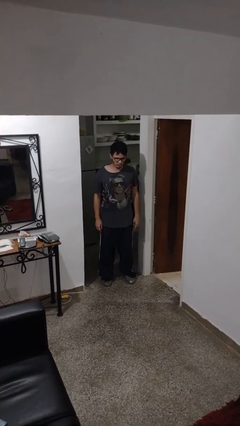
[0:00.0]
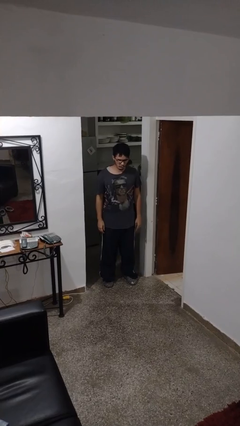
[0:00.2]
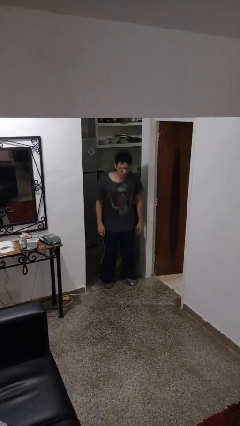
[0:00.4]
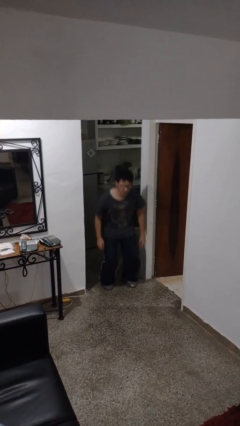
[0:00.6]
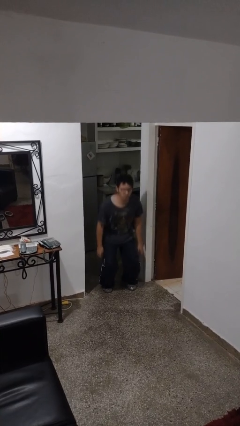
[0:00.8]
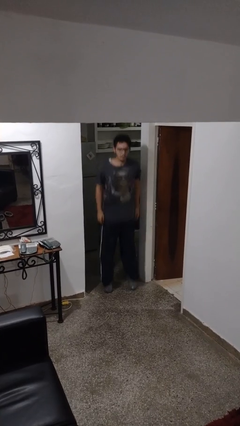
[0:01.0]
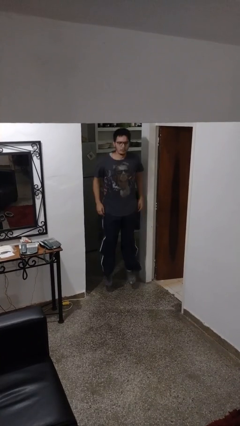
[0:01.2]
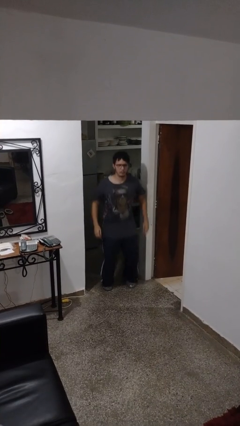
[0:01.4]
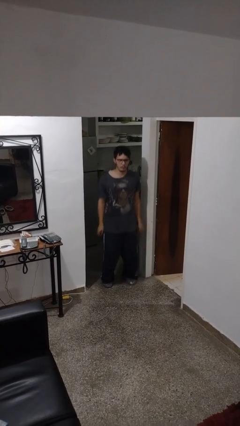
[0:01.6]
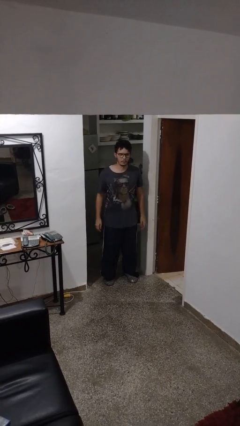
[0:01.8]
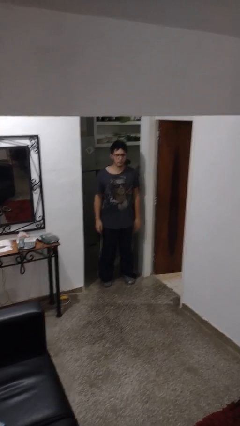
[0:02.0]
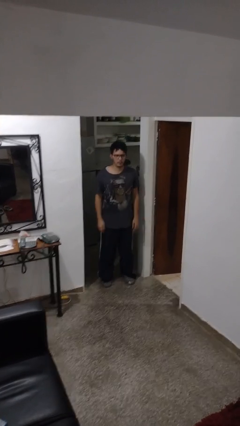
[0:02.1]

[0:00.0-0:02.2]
person jumps

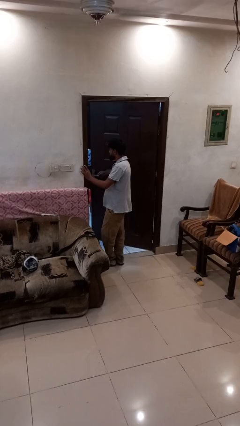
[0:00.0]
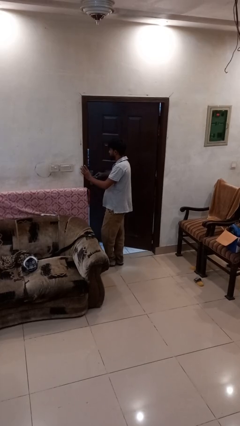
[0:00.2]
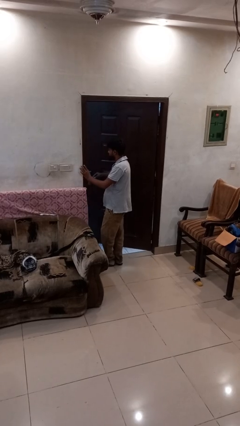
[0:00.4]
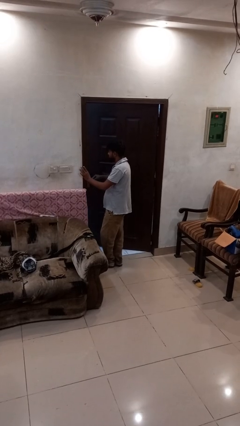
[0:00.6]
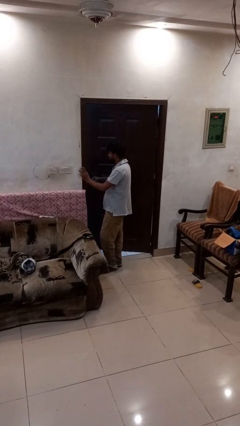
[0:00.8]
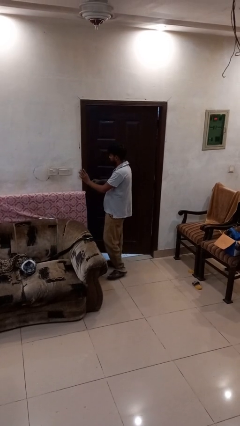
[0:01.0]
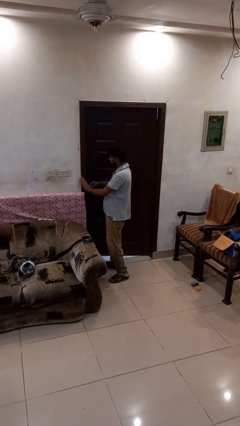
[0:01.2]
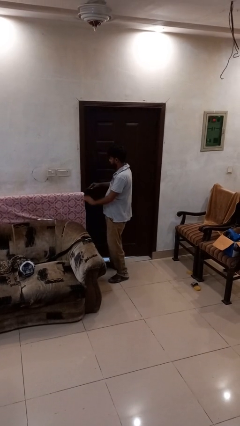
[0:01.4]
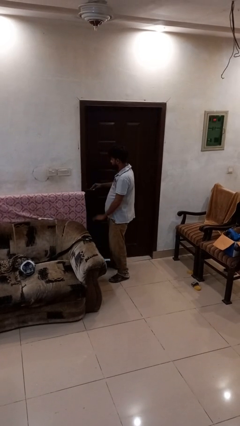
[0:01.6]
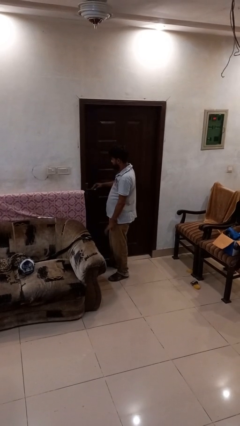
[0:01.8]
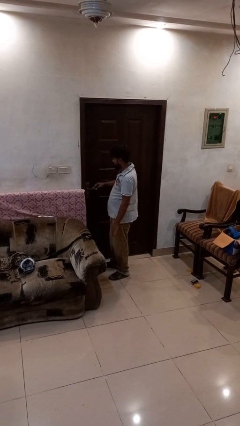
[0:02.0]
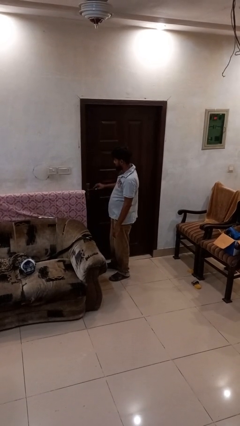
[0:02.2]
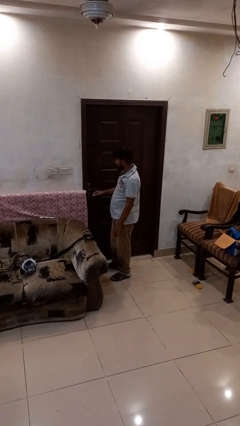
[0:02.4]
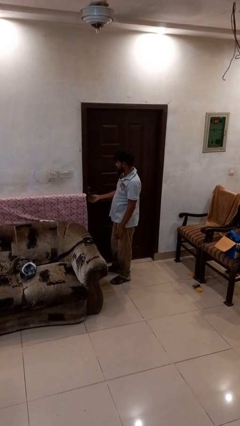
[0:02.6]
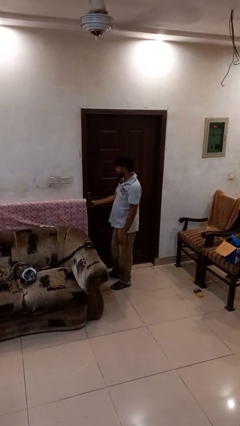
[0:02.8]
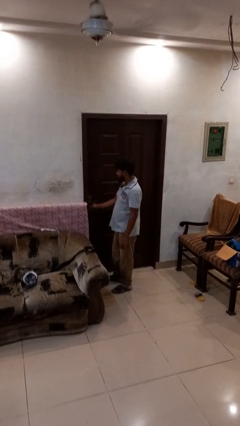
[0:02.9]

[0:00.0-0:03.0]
person closes facility door

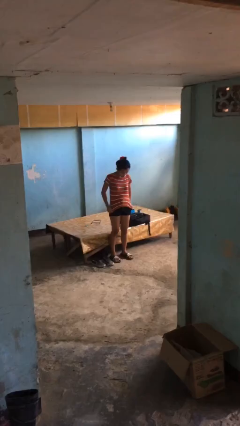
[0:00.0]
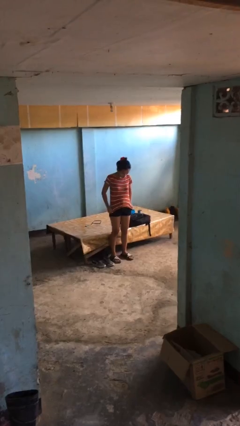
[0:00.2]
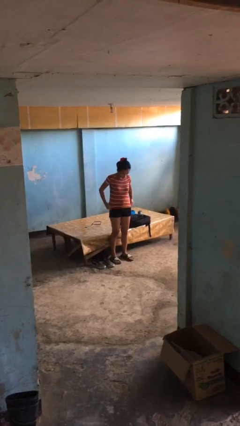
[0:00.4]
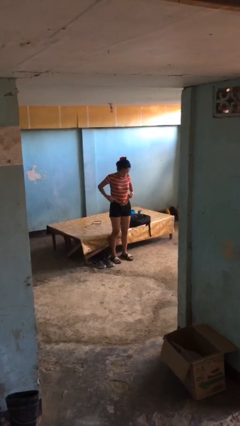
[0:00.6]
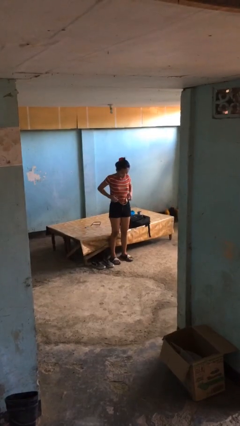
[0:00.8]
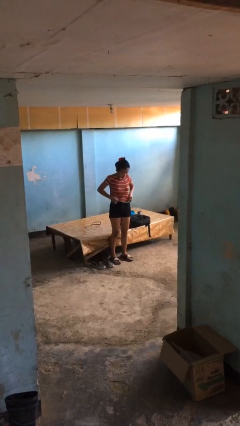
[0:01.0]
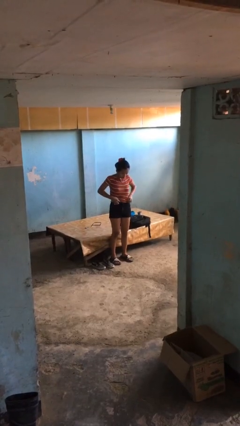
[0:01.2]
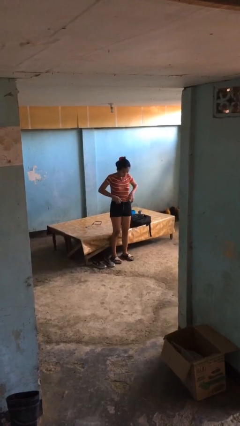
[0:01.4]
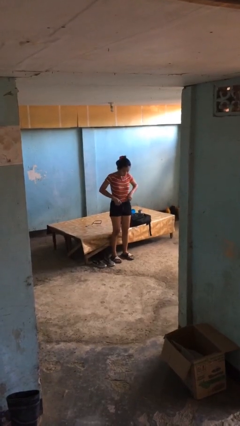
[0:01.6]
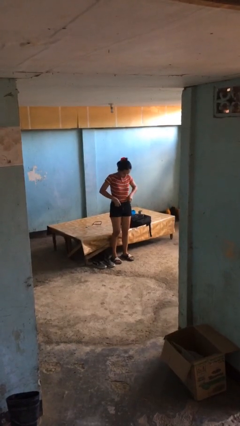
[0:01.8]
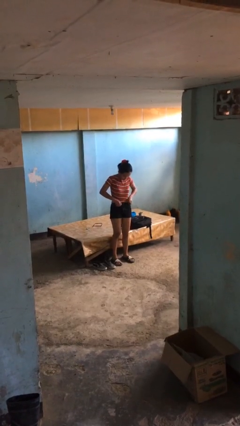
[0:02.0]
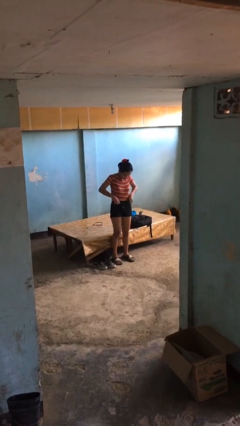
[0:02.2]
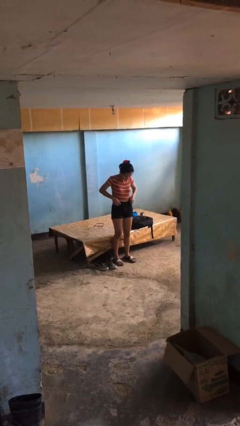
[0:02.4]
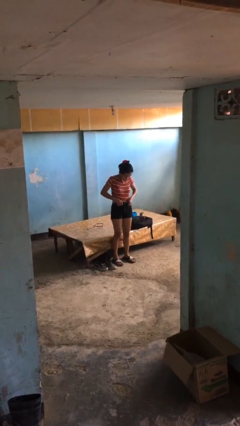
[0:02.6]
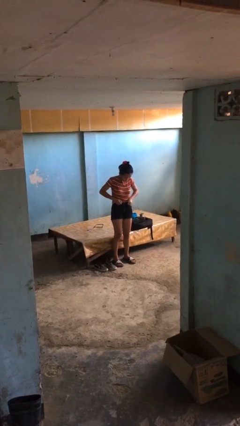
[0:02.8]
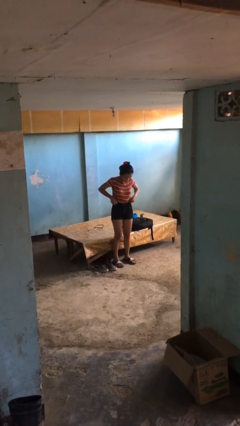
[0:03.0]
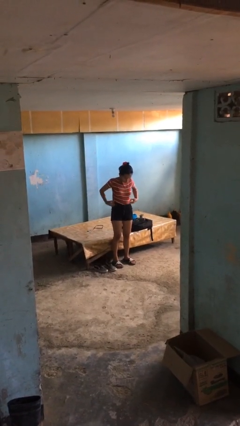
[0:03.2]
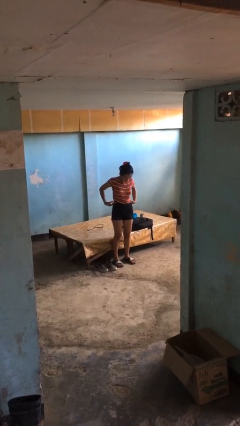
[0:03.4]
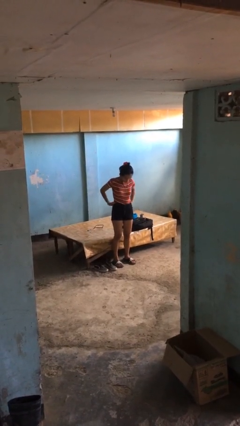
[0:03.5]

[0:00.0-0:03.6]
person tucks in shirt

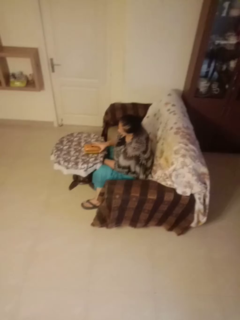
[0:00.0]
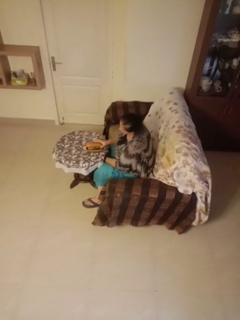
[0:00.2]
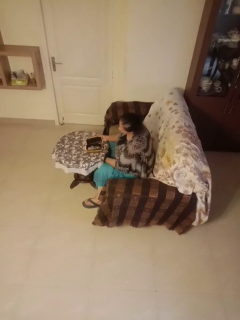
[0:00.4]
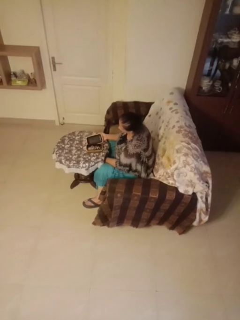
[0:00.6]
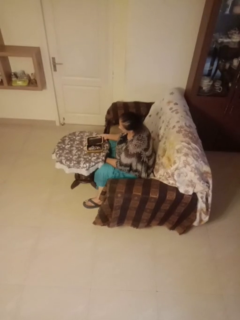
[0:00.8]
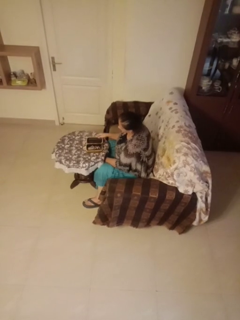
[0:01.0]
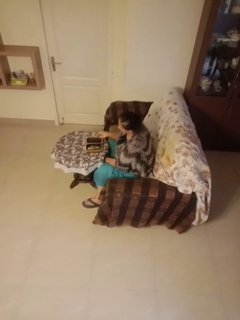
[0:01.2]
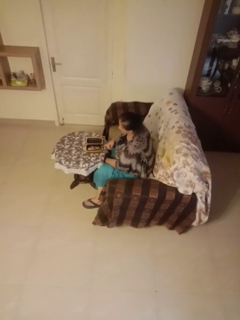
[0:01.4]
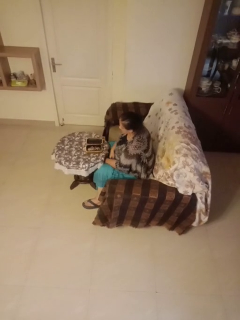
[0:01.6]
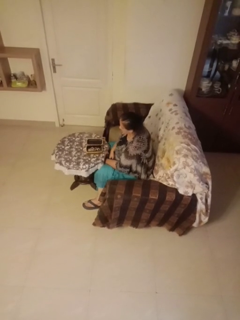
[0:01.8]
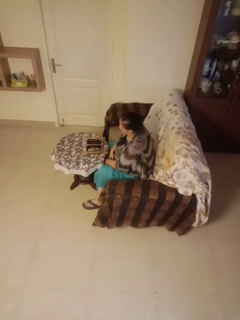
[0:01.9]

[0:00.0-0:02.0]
person opens jewelry box

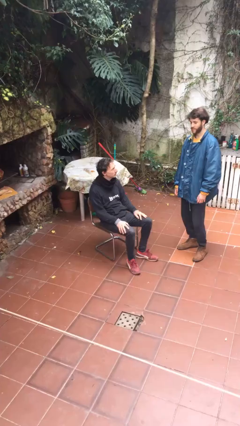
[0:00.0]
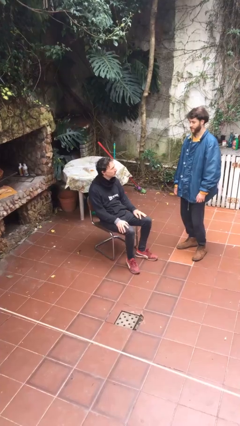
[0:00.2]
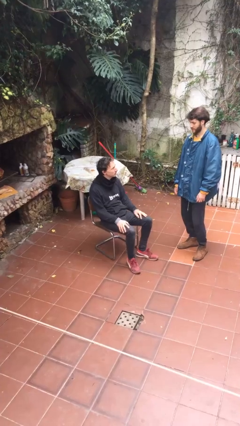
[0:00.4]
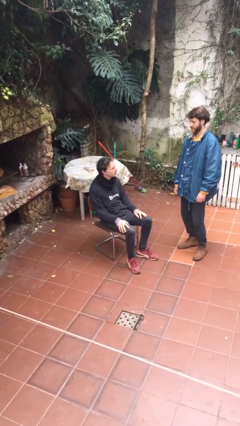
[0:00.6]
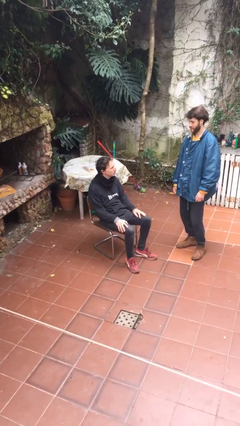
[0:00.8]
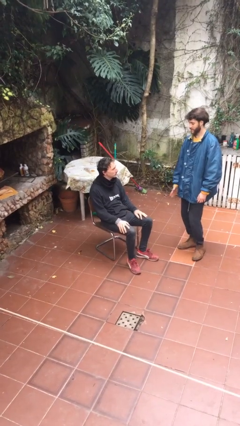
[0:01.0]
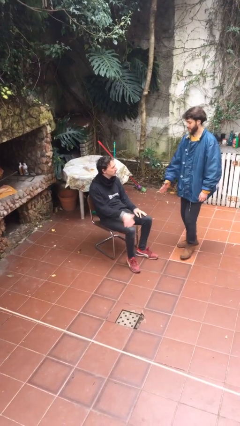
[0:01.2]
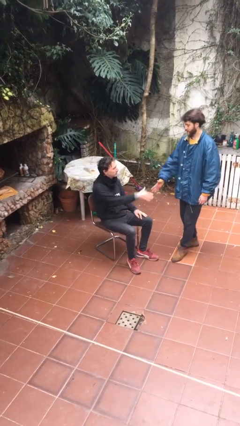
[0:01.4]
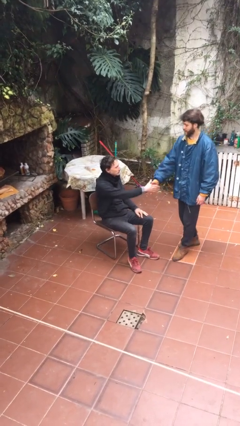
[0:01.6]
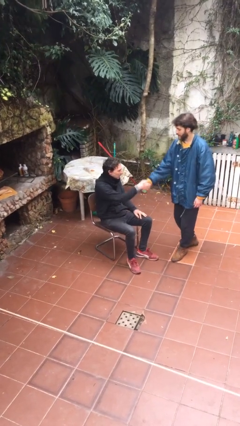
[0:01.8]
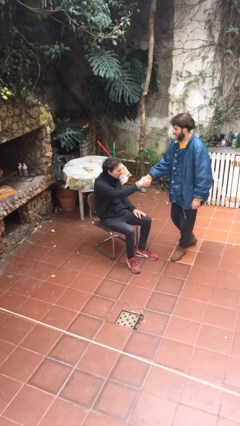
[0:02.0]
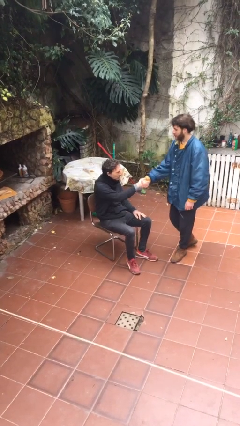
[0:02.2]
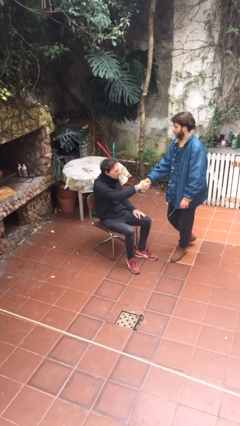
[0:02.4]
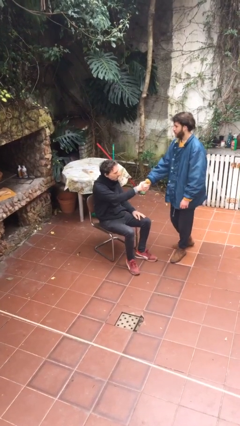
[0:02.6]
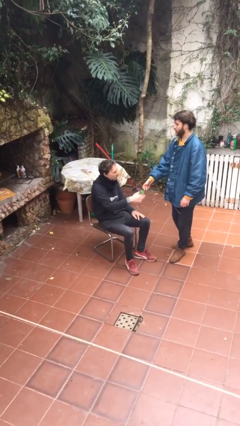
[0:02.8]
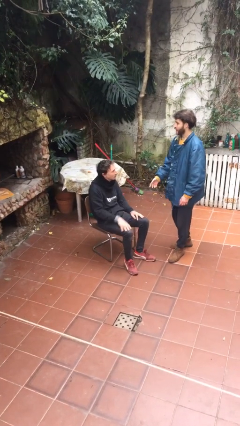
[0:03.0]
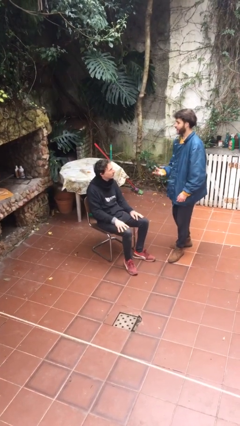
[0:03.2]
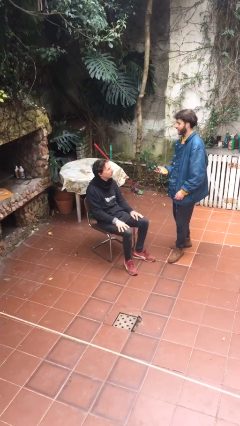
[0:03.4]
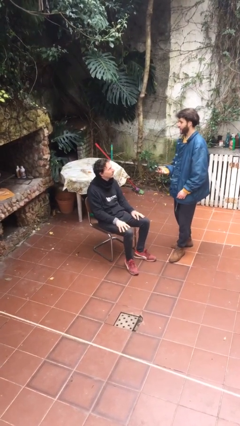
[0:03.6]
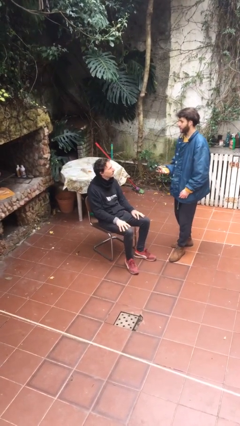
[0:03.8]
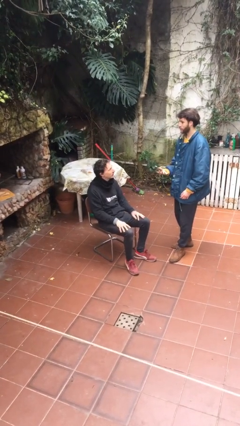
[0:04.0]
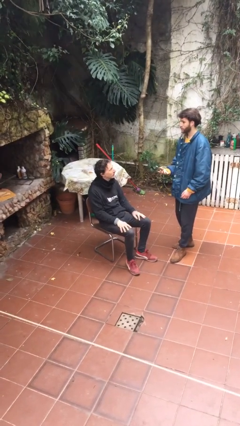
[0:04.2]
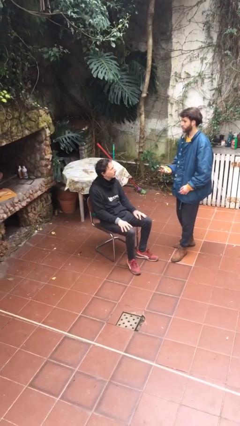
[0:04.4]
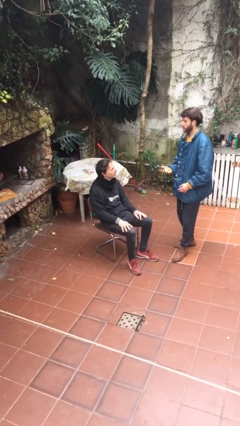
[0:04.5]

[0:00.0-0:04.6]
person shakes hand

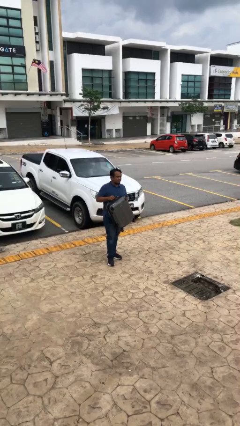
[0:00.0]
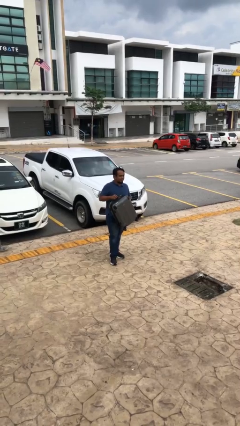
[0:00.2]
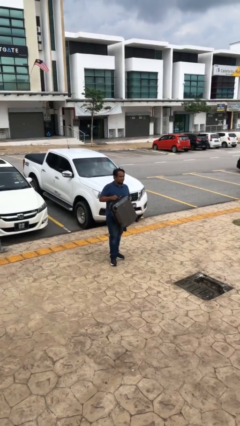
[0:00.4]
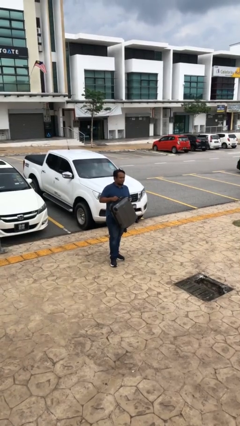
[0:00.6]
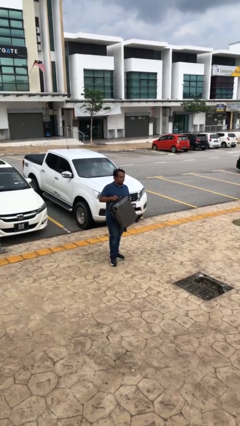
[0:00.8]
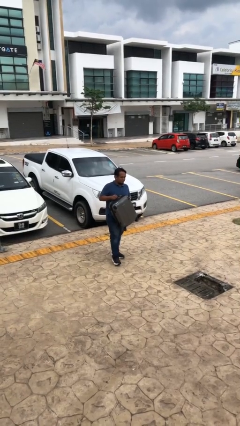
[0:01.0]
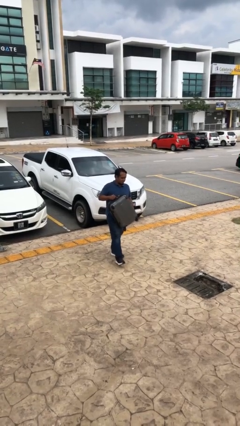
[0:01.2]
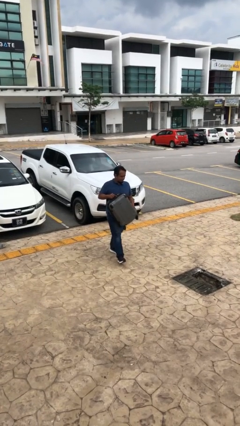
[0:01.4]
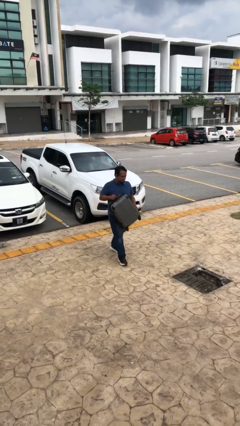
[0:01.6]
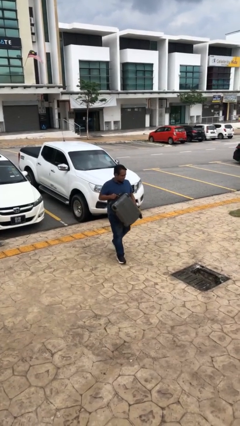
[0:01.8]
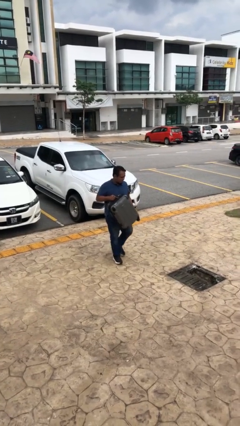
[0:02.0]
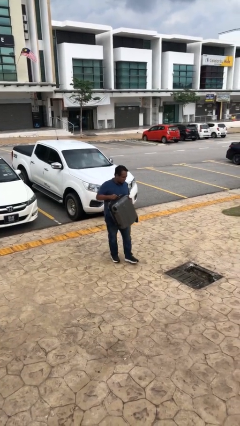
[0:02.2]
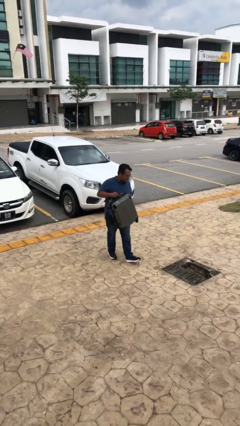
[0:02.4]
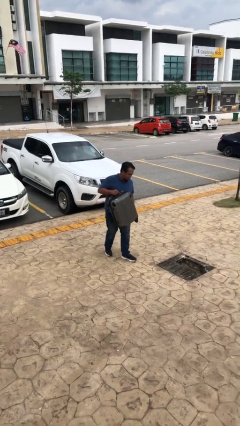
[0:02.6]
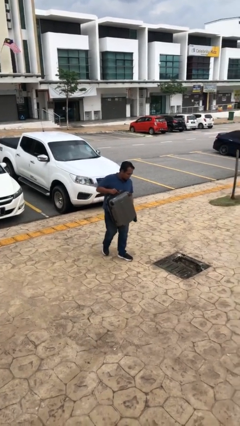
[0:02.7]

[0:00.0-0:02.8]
person carries heavy object
